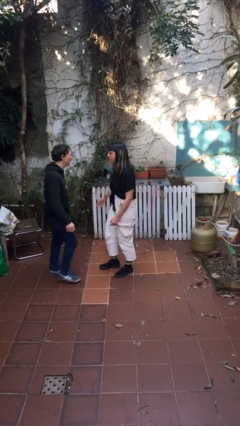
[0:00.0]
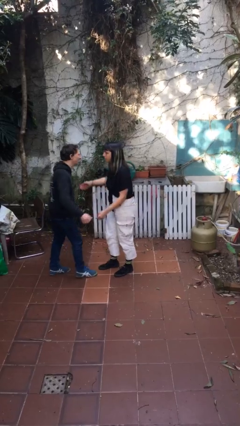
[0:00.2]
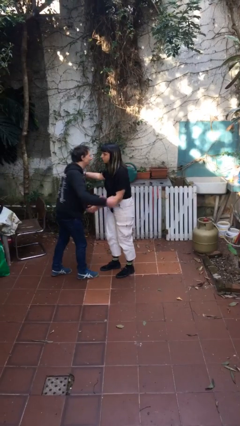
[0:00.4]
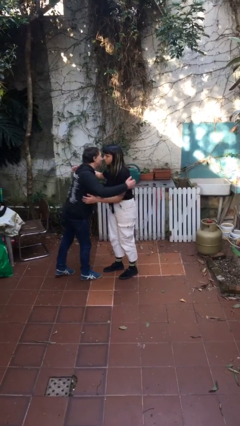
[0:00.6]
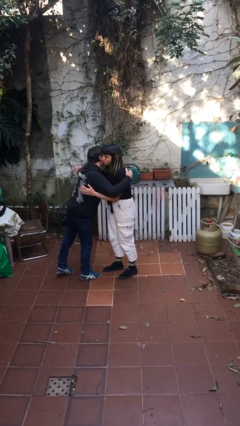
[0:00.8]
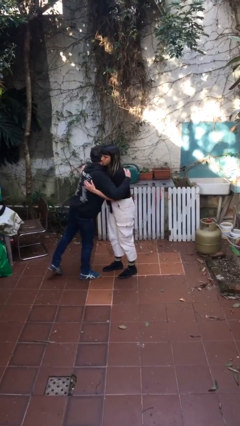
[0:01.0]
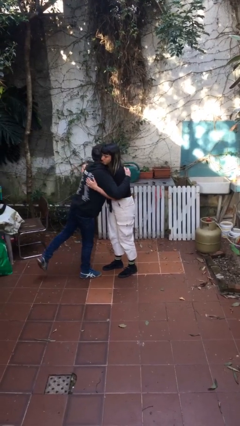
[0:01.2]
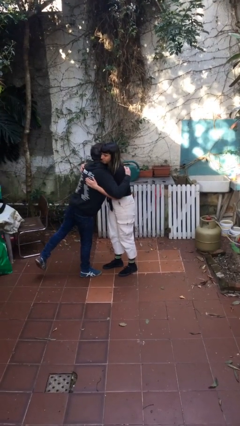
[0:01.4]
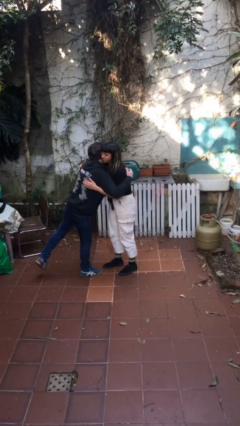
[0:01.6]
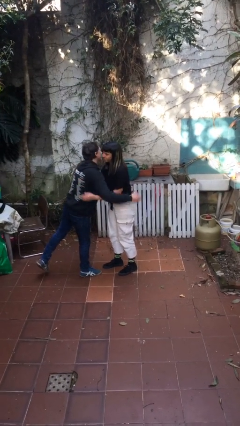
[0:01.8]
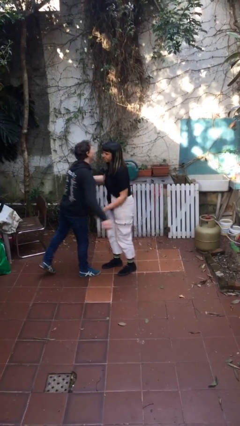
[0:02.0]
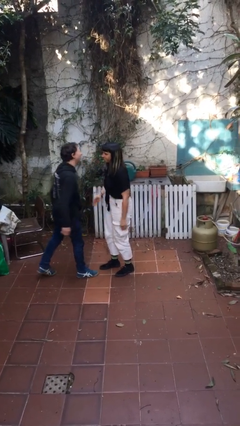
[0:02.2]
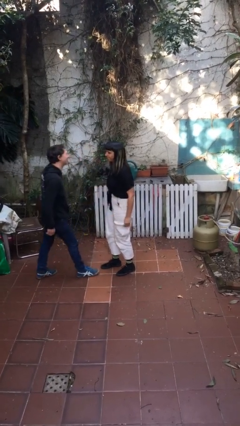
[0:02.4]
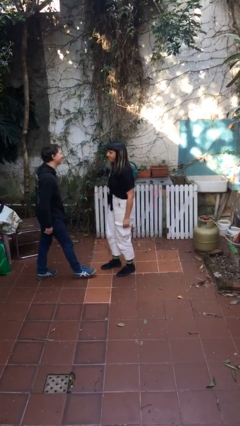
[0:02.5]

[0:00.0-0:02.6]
person embraces person

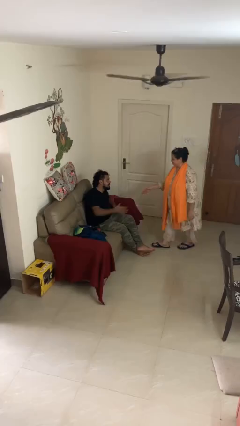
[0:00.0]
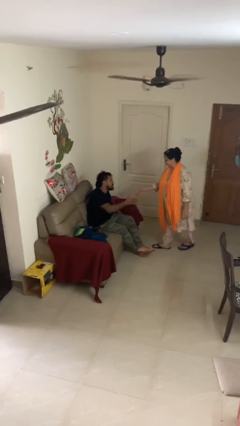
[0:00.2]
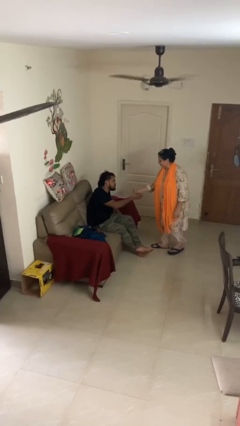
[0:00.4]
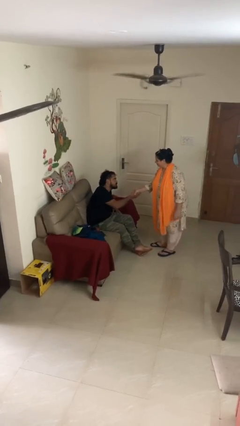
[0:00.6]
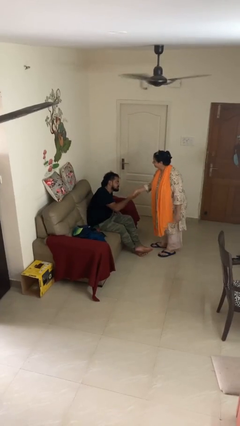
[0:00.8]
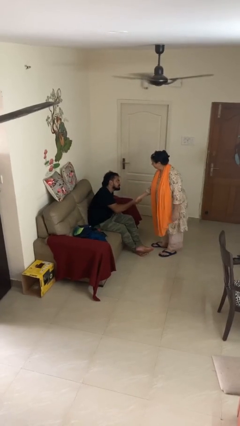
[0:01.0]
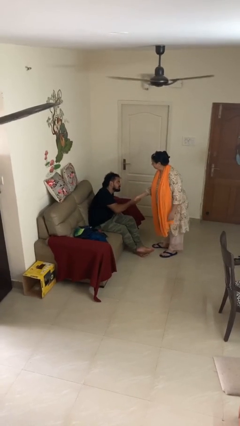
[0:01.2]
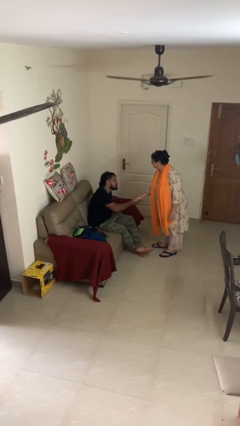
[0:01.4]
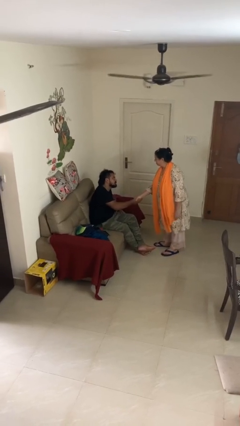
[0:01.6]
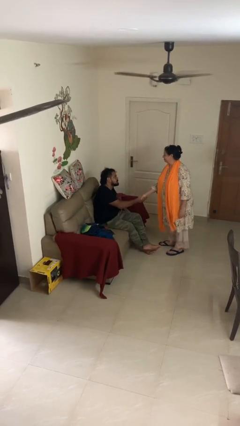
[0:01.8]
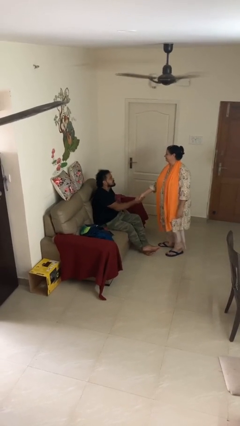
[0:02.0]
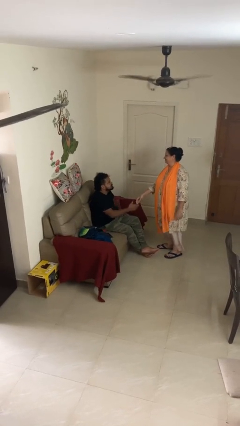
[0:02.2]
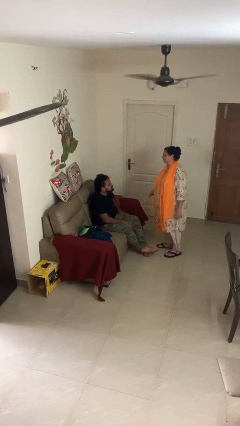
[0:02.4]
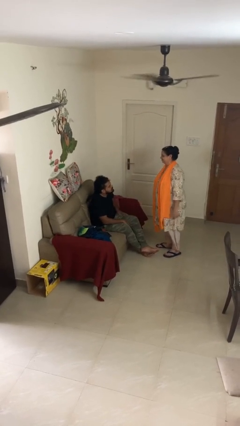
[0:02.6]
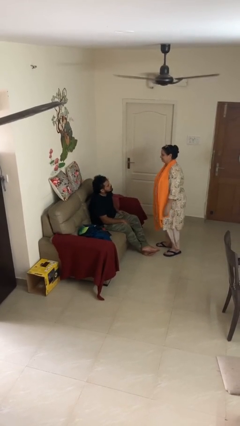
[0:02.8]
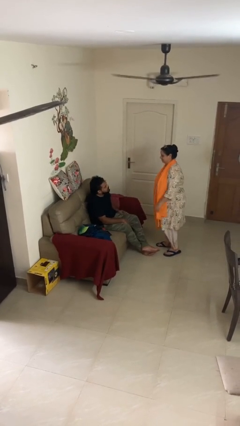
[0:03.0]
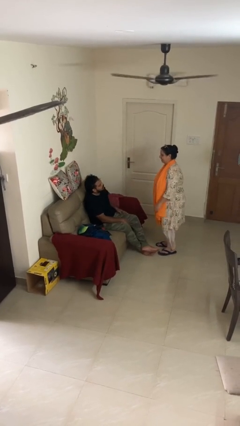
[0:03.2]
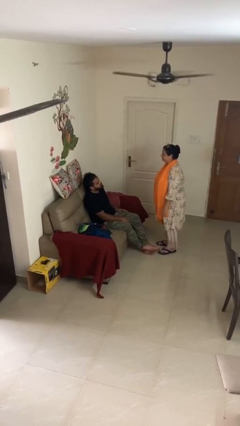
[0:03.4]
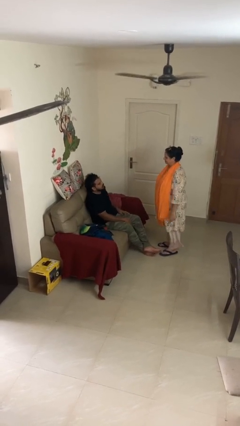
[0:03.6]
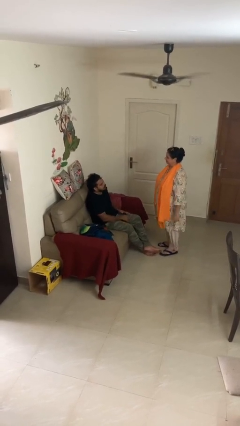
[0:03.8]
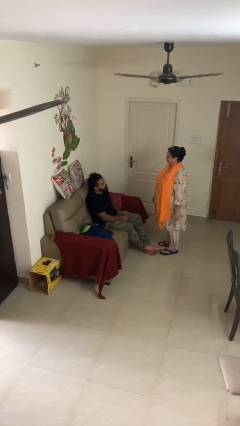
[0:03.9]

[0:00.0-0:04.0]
person shakes hand

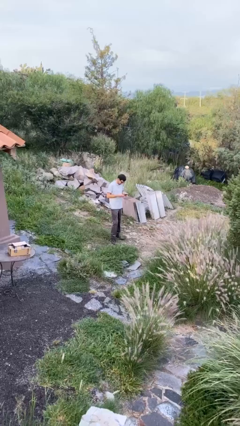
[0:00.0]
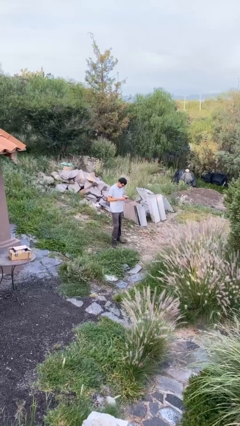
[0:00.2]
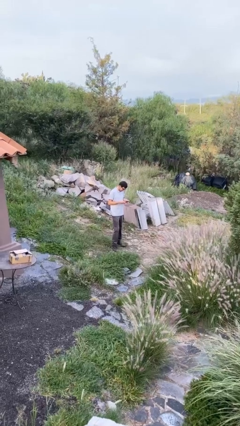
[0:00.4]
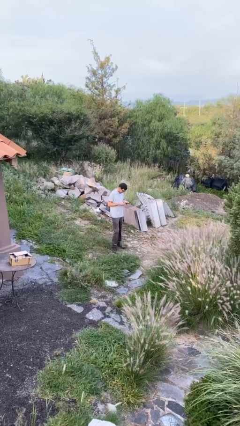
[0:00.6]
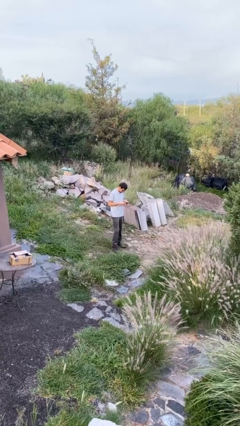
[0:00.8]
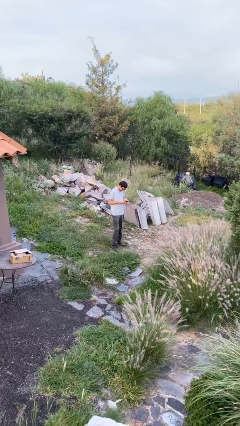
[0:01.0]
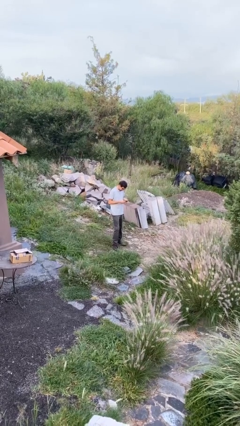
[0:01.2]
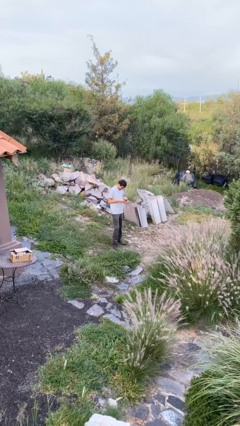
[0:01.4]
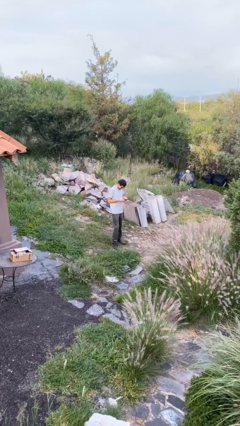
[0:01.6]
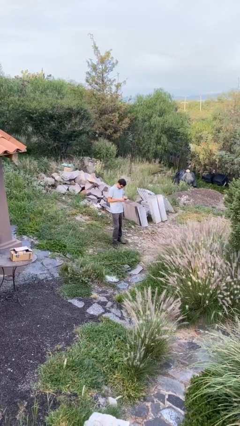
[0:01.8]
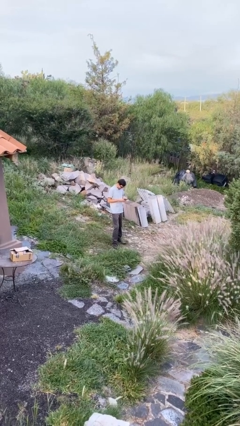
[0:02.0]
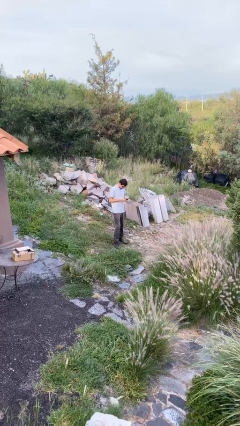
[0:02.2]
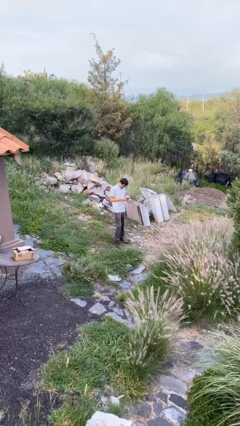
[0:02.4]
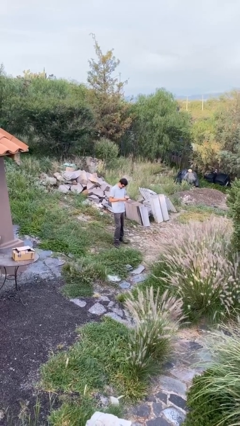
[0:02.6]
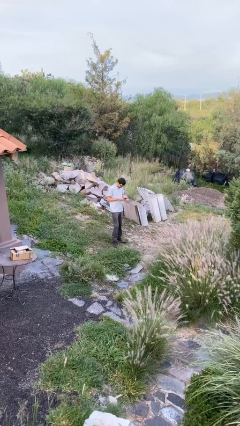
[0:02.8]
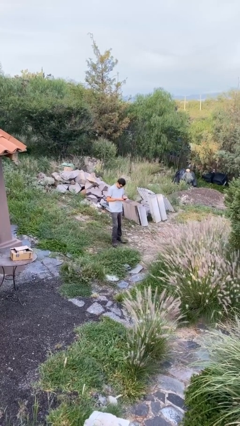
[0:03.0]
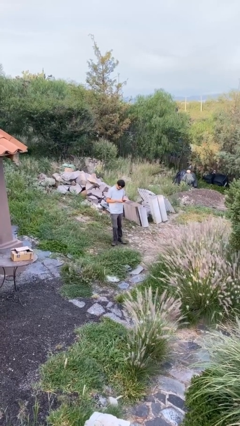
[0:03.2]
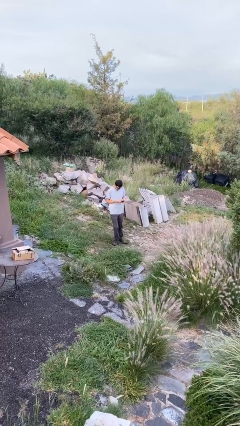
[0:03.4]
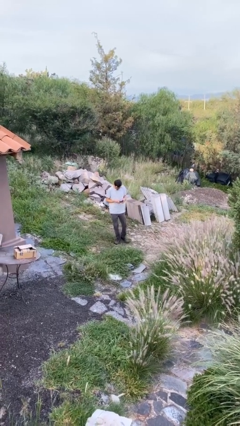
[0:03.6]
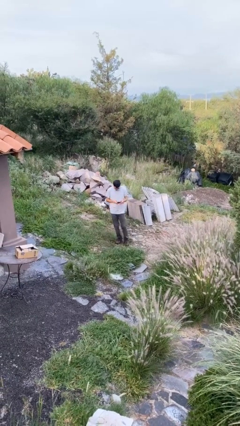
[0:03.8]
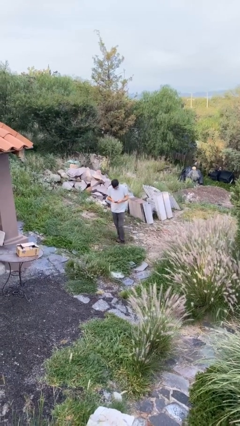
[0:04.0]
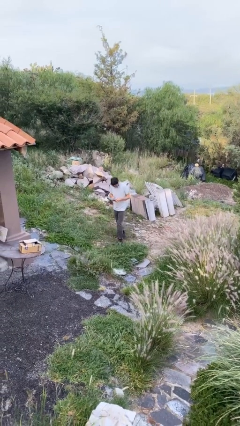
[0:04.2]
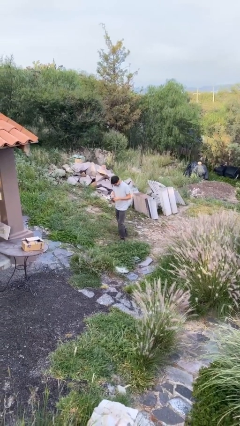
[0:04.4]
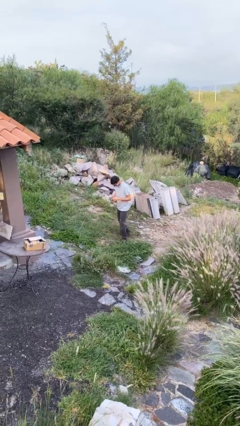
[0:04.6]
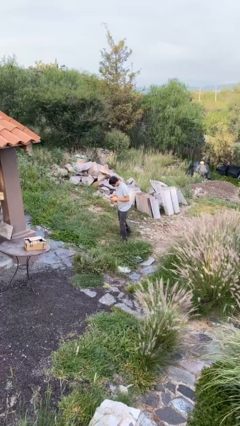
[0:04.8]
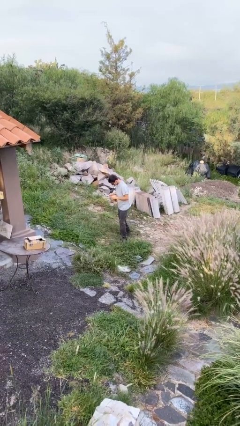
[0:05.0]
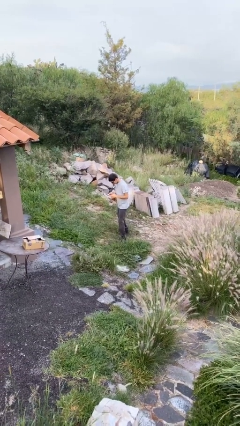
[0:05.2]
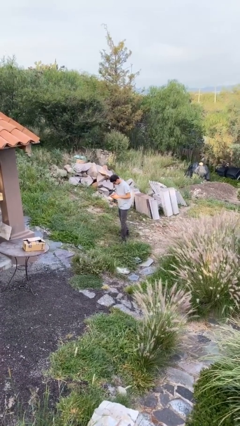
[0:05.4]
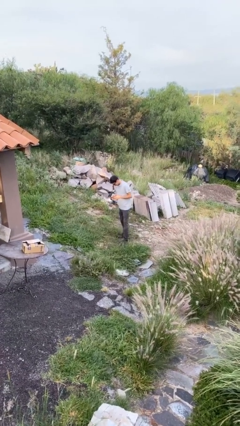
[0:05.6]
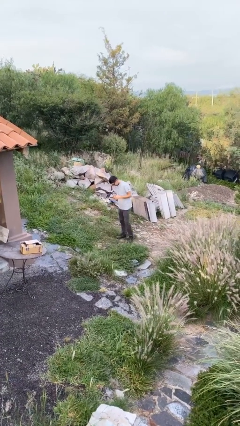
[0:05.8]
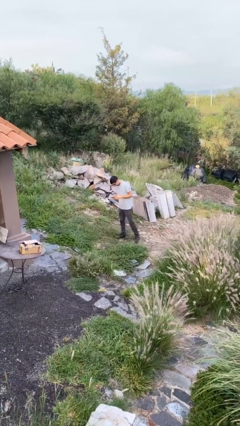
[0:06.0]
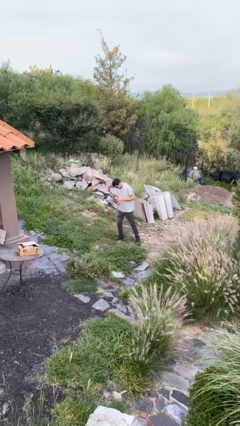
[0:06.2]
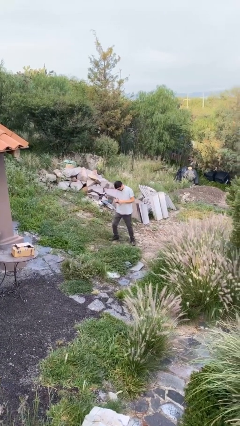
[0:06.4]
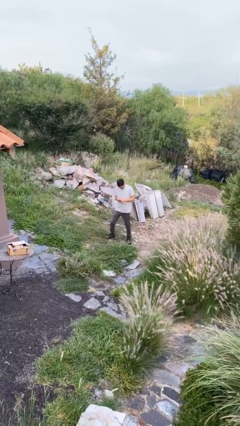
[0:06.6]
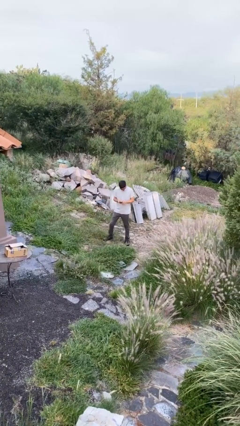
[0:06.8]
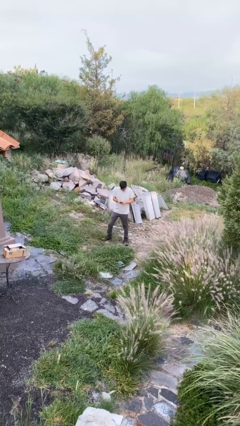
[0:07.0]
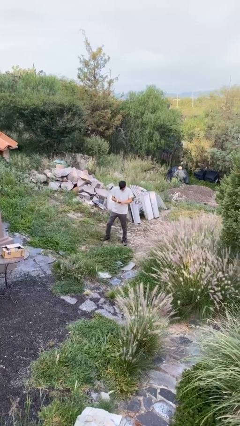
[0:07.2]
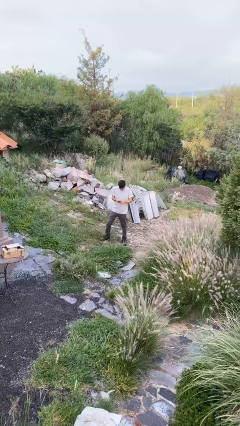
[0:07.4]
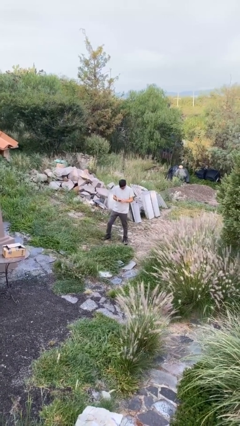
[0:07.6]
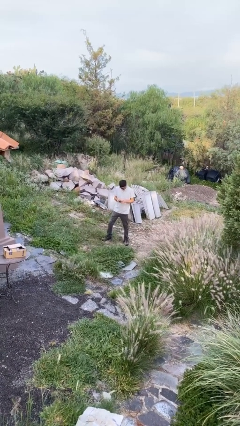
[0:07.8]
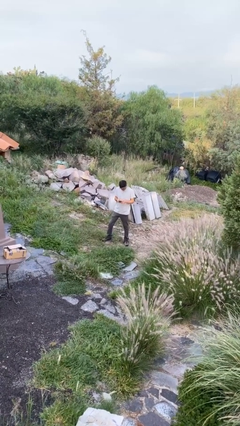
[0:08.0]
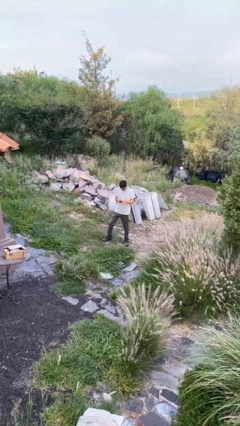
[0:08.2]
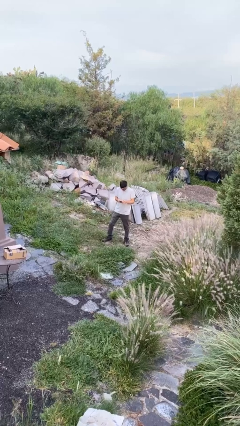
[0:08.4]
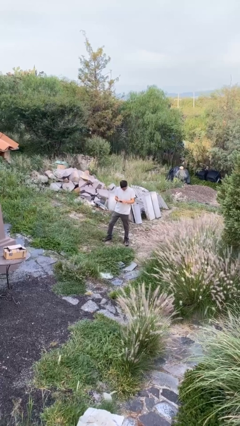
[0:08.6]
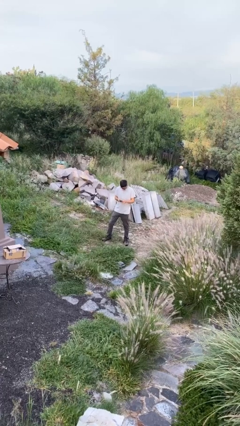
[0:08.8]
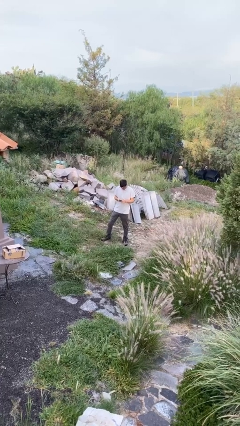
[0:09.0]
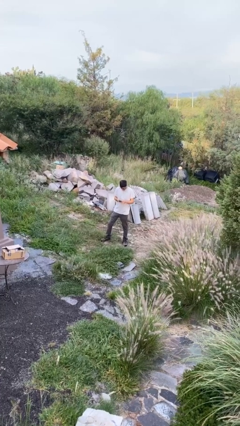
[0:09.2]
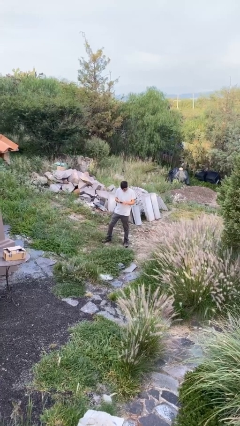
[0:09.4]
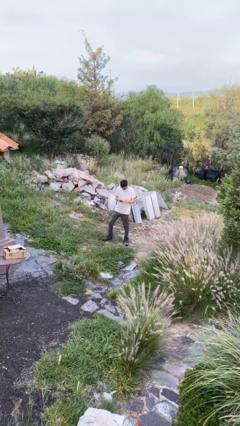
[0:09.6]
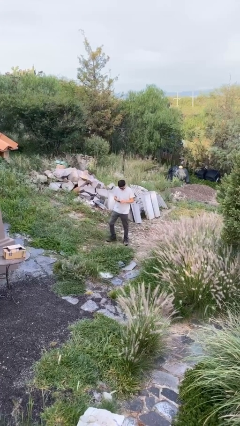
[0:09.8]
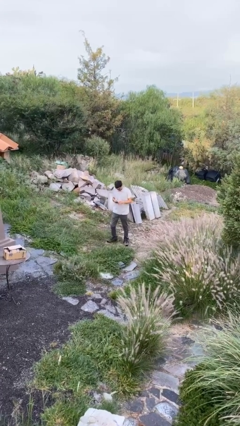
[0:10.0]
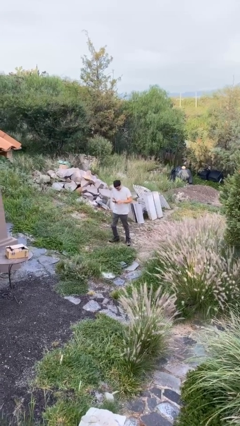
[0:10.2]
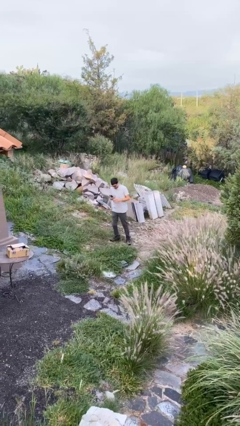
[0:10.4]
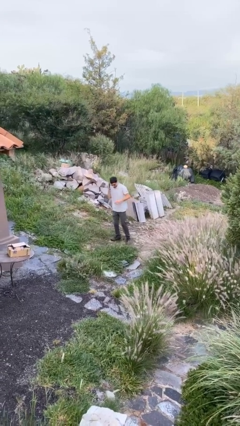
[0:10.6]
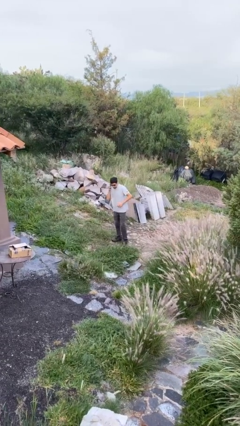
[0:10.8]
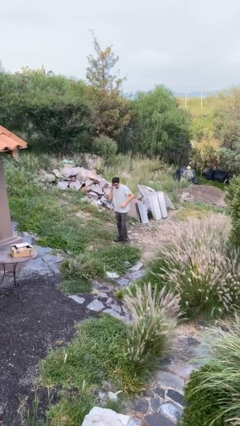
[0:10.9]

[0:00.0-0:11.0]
person texts on phone

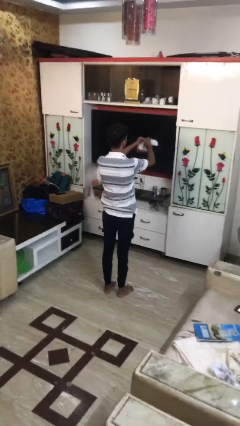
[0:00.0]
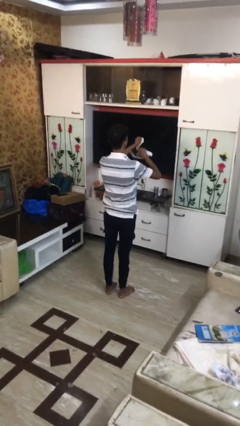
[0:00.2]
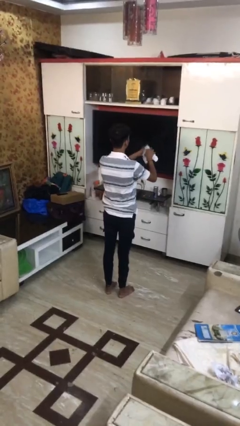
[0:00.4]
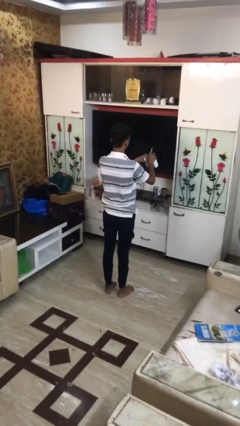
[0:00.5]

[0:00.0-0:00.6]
person tears paper
